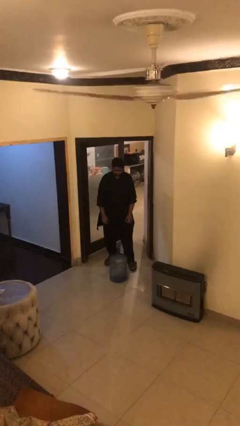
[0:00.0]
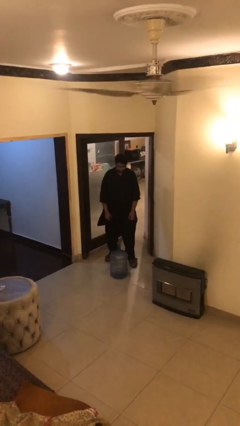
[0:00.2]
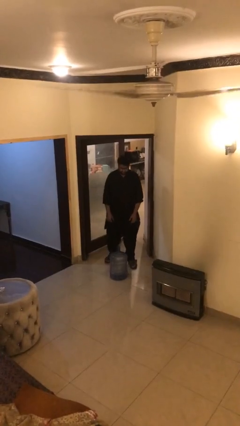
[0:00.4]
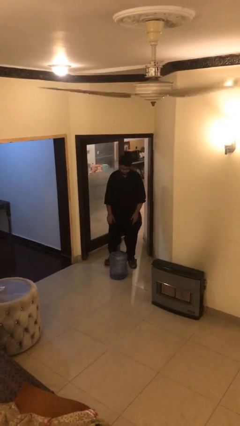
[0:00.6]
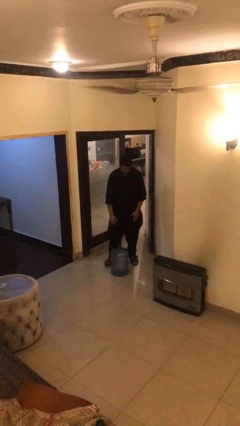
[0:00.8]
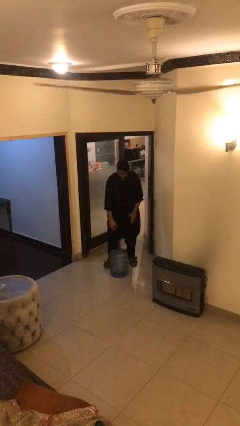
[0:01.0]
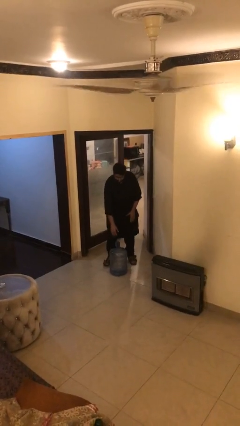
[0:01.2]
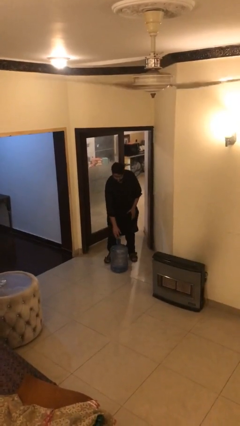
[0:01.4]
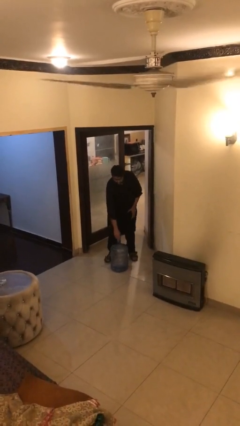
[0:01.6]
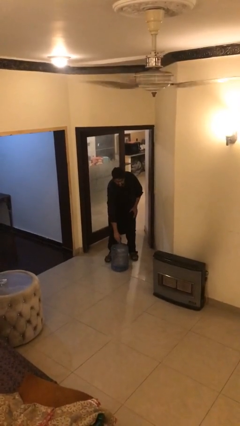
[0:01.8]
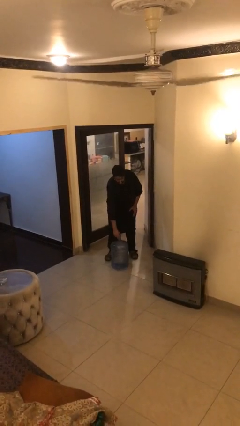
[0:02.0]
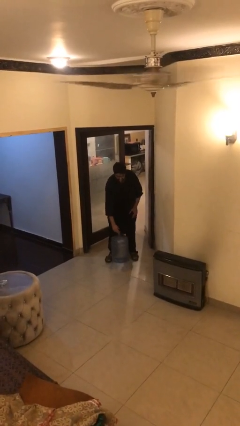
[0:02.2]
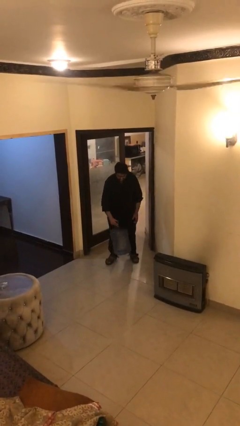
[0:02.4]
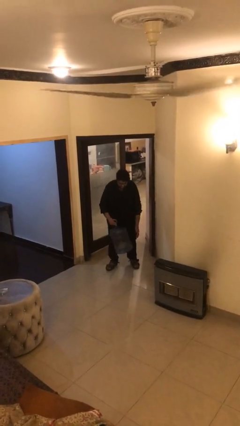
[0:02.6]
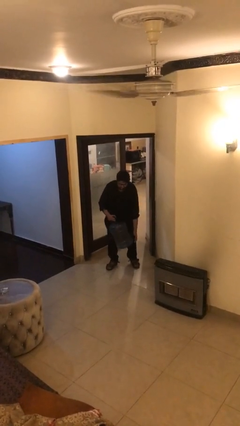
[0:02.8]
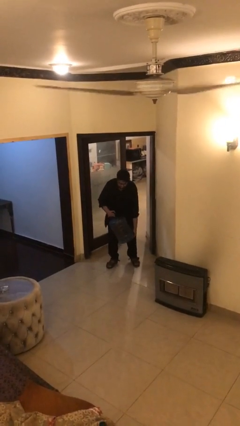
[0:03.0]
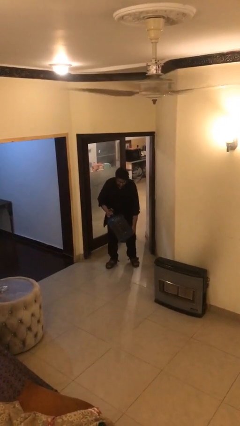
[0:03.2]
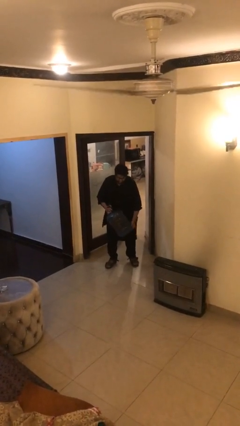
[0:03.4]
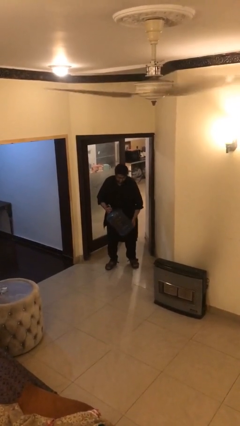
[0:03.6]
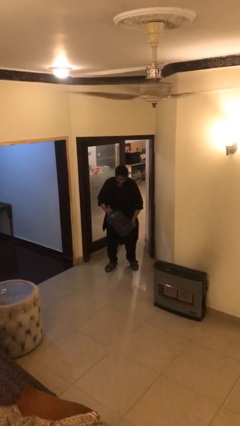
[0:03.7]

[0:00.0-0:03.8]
person picks up object from floor

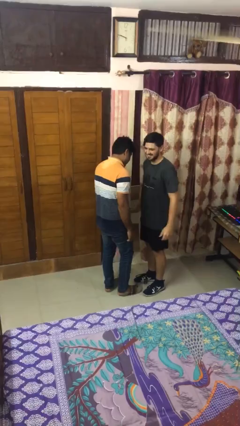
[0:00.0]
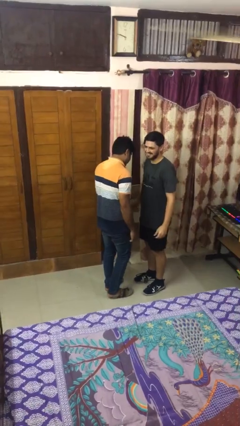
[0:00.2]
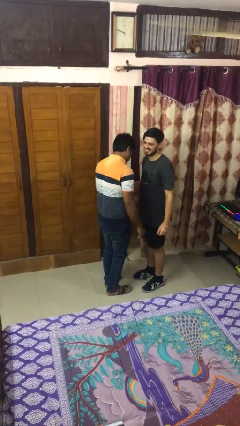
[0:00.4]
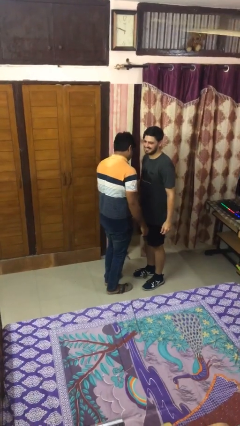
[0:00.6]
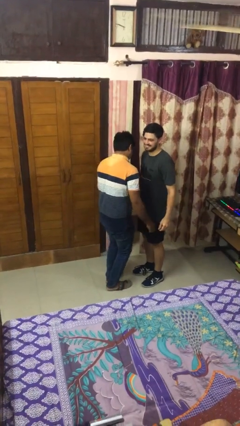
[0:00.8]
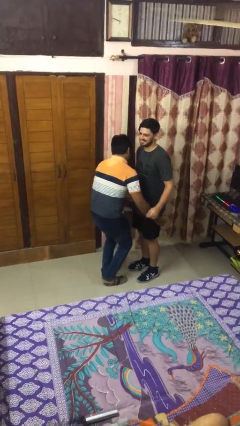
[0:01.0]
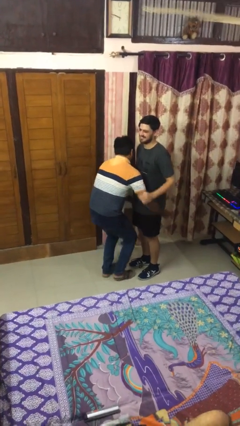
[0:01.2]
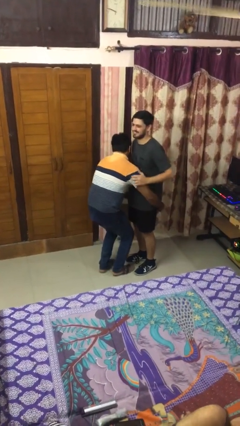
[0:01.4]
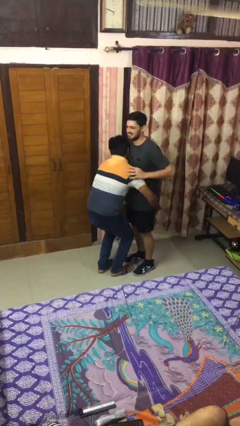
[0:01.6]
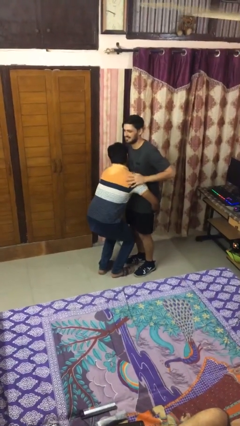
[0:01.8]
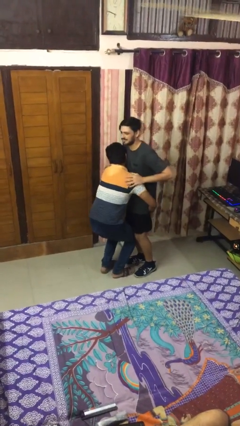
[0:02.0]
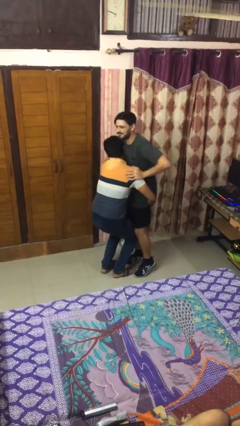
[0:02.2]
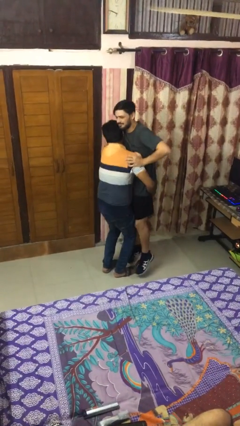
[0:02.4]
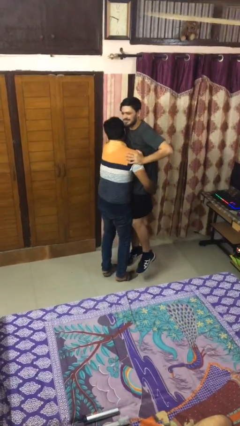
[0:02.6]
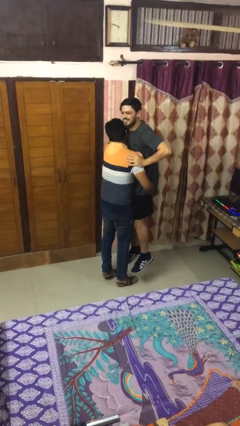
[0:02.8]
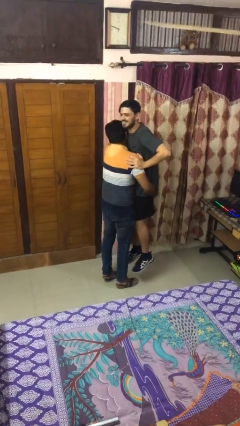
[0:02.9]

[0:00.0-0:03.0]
person picks up person

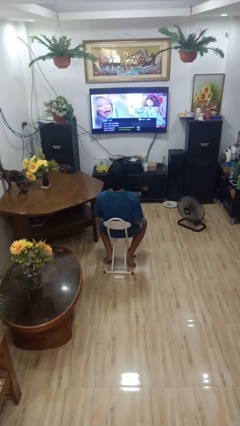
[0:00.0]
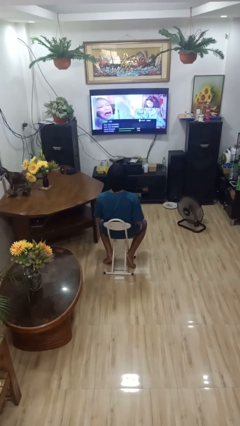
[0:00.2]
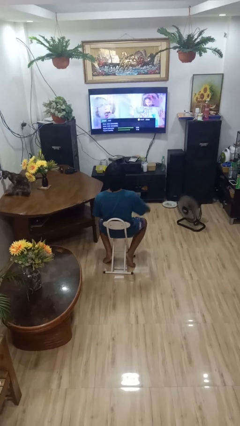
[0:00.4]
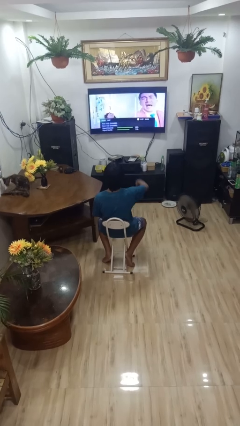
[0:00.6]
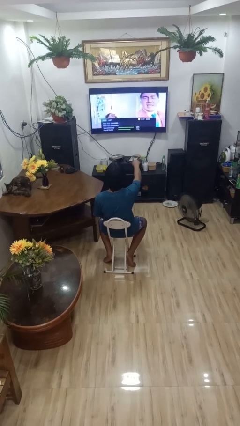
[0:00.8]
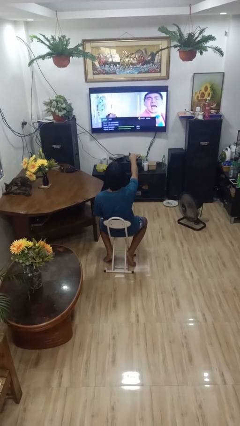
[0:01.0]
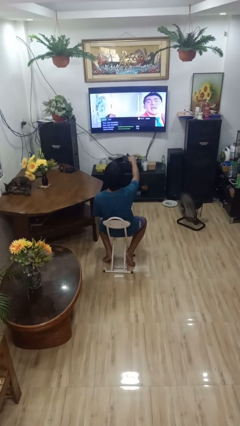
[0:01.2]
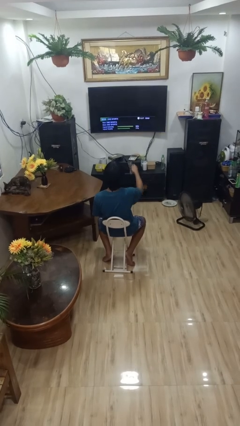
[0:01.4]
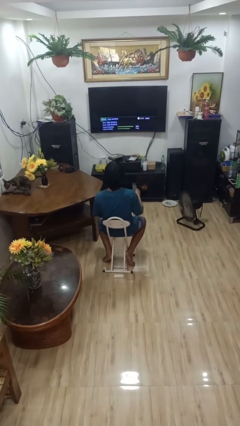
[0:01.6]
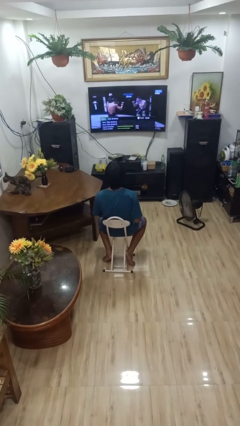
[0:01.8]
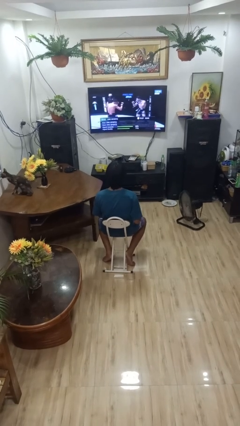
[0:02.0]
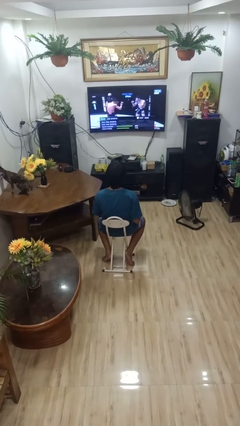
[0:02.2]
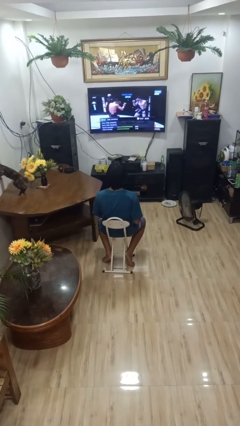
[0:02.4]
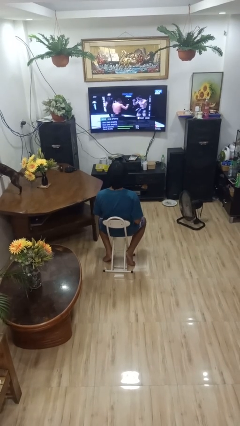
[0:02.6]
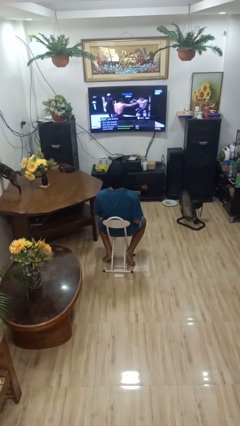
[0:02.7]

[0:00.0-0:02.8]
person uses television remote

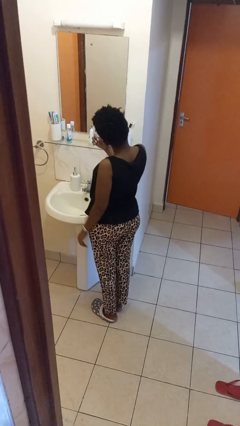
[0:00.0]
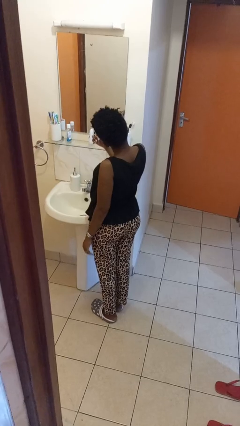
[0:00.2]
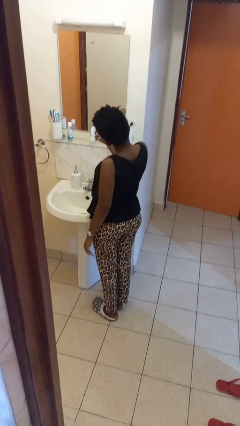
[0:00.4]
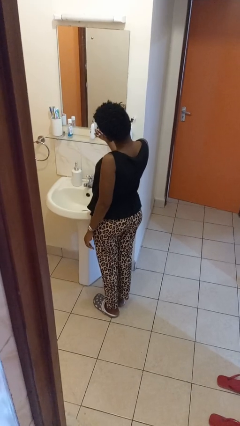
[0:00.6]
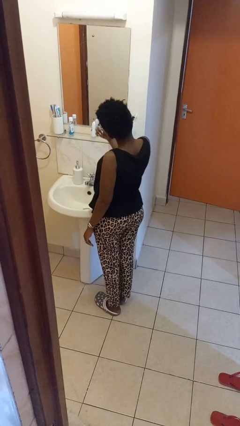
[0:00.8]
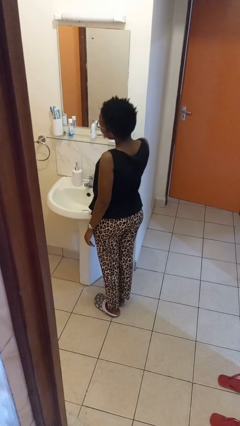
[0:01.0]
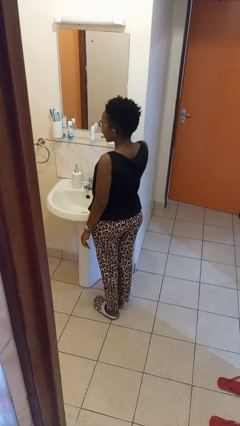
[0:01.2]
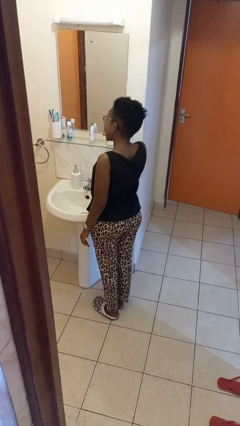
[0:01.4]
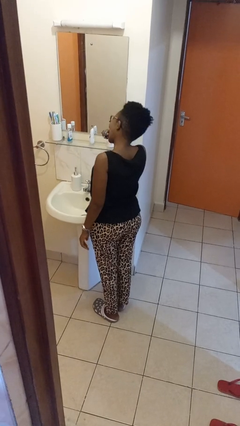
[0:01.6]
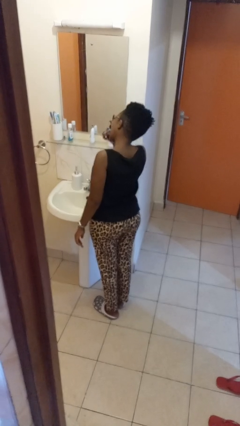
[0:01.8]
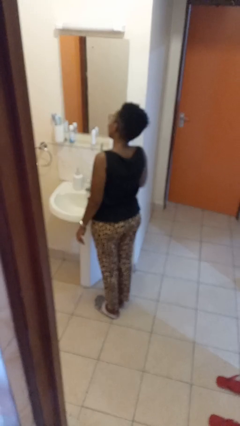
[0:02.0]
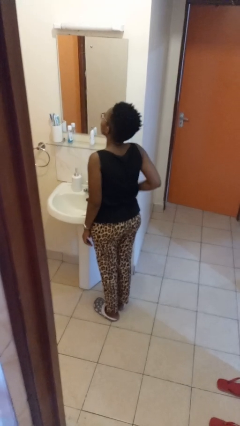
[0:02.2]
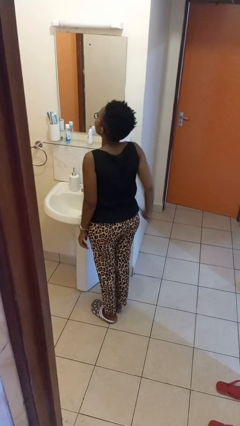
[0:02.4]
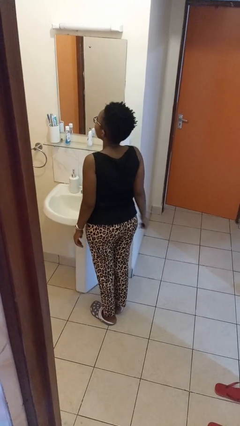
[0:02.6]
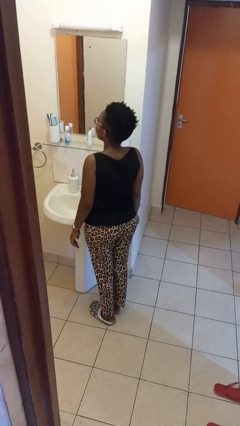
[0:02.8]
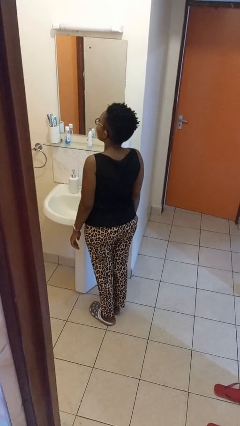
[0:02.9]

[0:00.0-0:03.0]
person brushes teeth

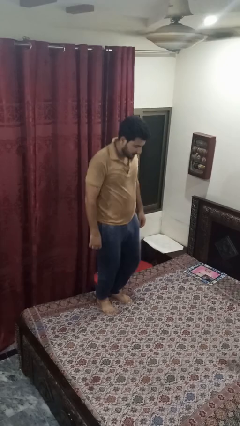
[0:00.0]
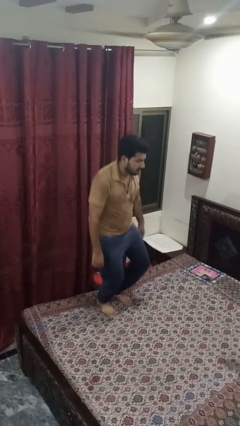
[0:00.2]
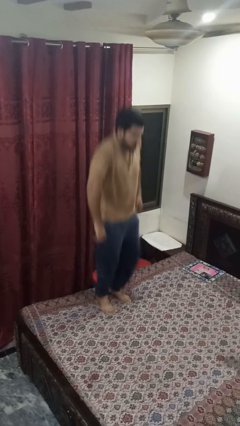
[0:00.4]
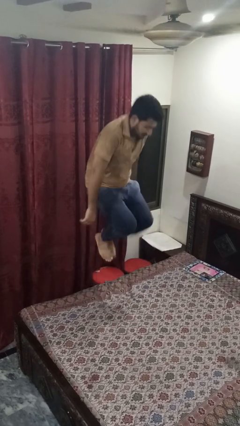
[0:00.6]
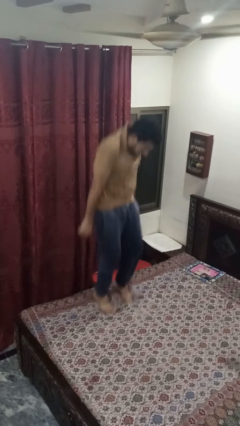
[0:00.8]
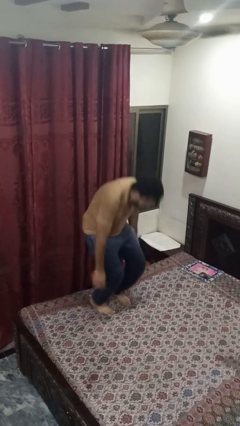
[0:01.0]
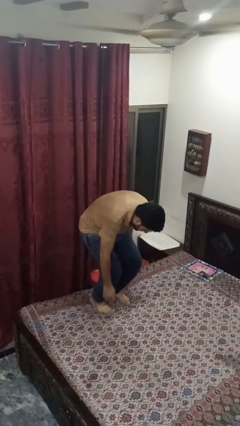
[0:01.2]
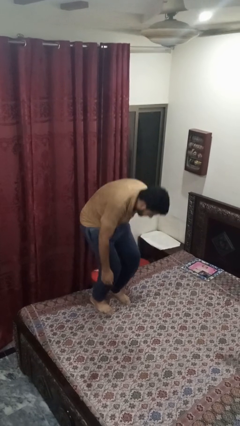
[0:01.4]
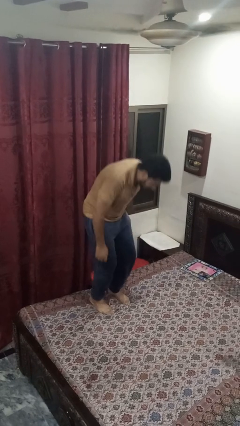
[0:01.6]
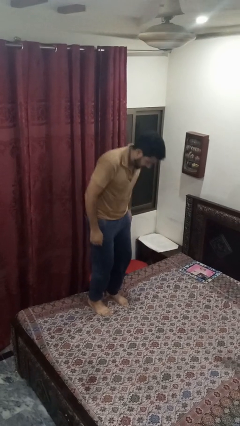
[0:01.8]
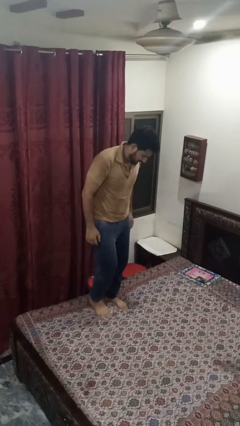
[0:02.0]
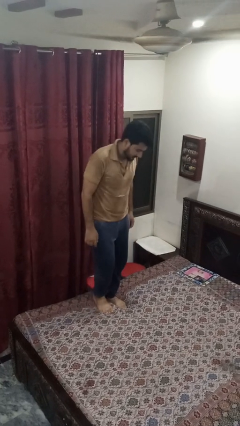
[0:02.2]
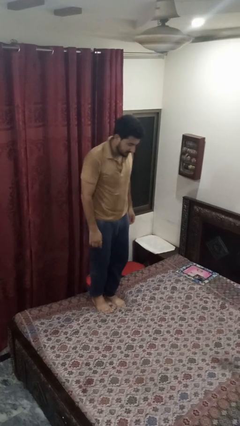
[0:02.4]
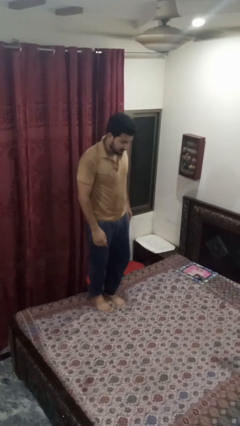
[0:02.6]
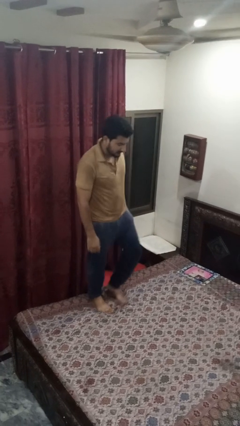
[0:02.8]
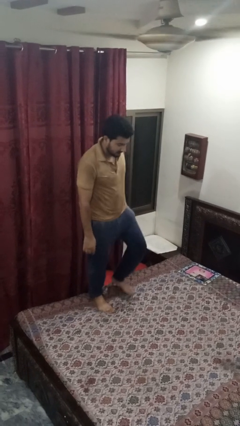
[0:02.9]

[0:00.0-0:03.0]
person jumps on bed

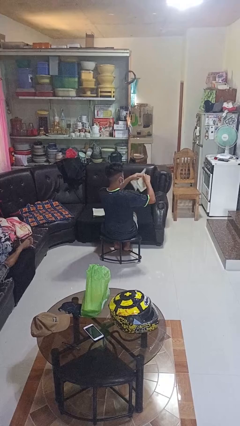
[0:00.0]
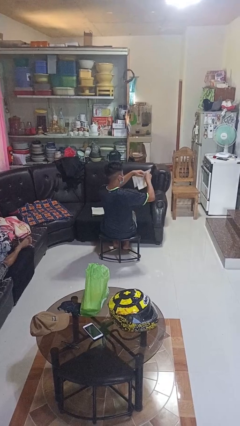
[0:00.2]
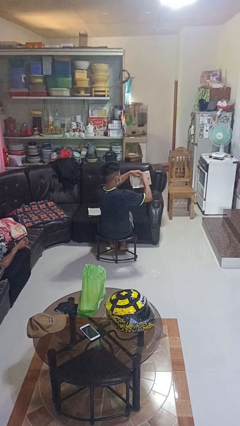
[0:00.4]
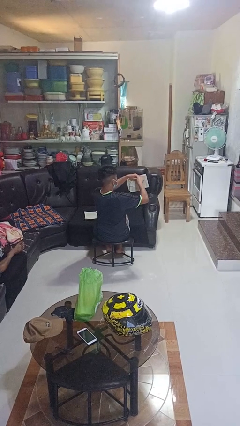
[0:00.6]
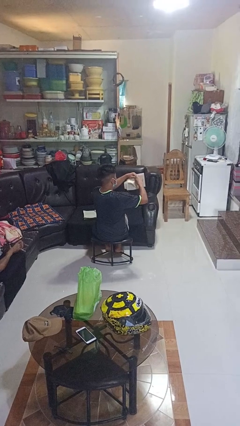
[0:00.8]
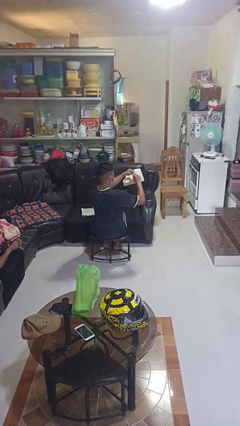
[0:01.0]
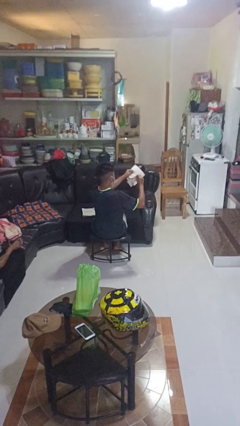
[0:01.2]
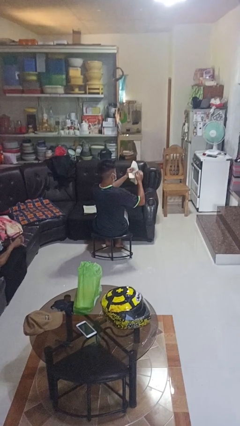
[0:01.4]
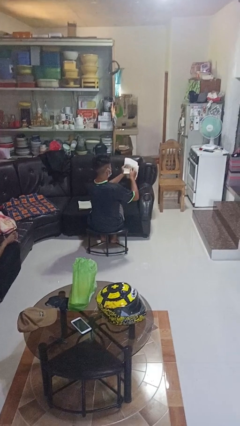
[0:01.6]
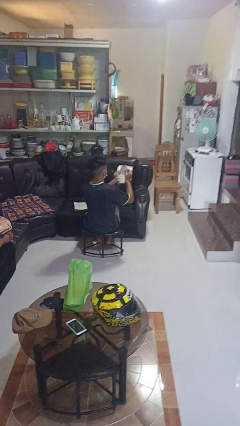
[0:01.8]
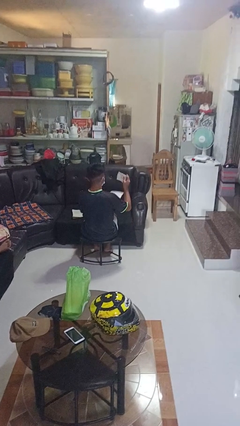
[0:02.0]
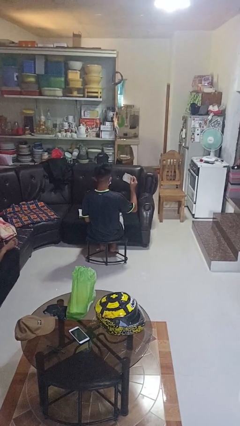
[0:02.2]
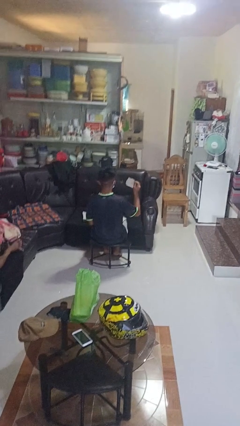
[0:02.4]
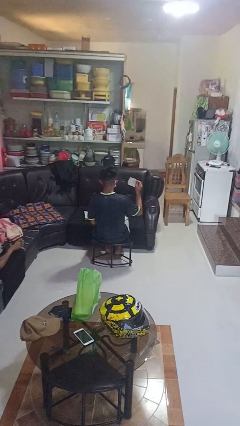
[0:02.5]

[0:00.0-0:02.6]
person tears paper
